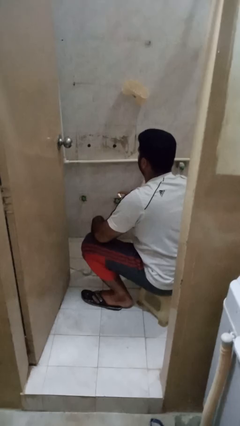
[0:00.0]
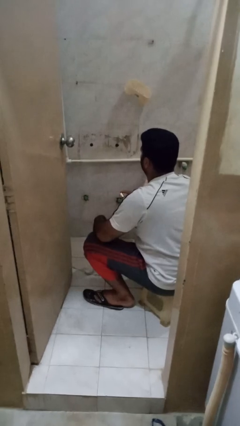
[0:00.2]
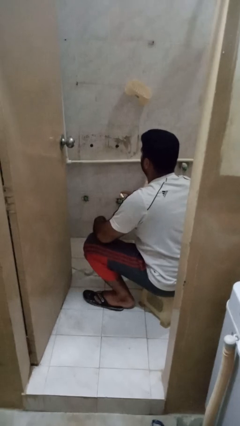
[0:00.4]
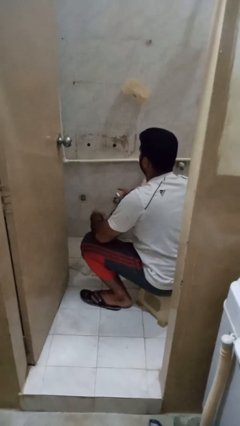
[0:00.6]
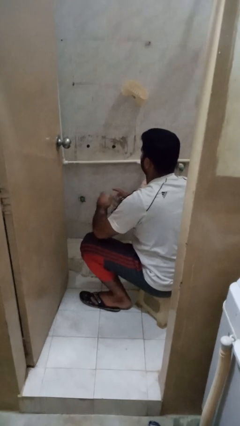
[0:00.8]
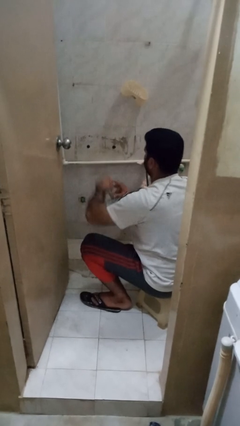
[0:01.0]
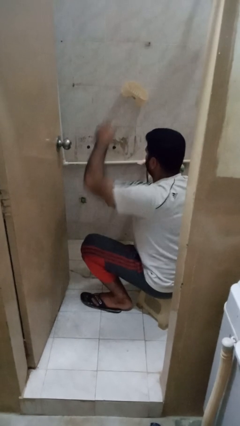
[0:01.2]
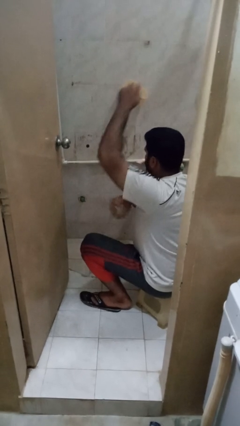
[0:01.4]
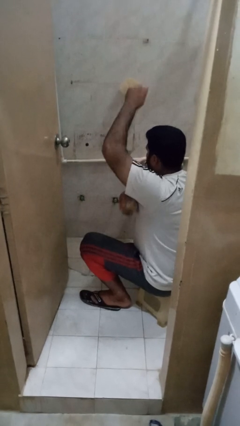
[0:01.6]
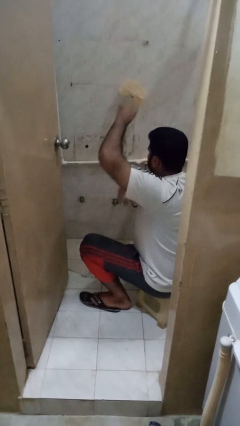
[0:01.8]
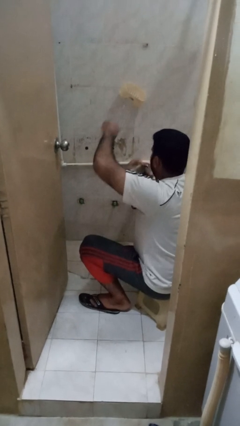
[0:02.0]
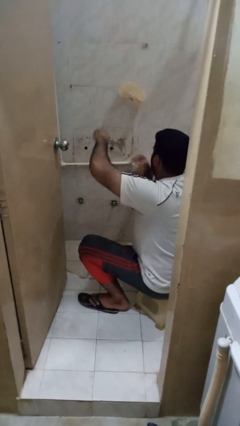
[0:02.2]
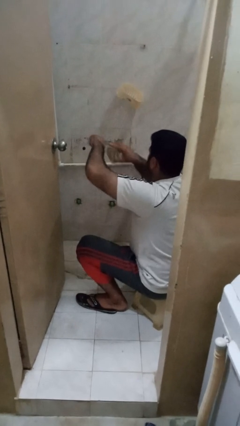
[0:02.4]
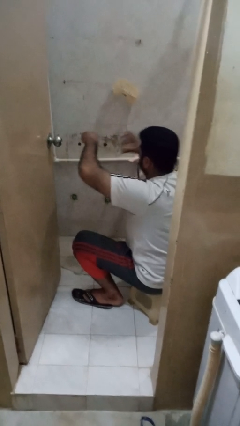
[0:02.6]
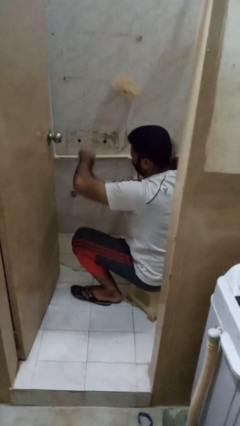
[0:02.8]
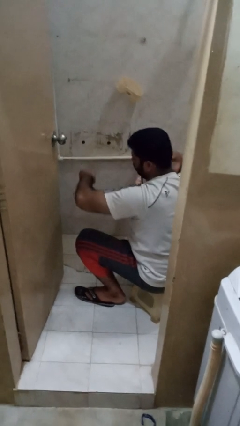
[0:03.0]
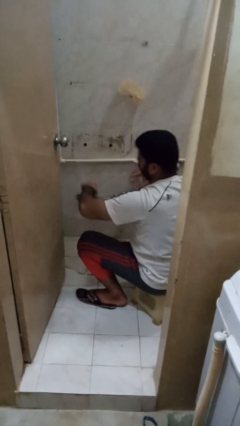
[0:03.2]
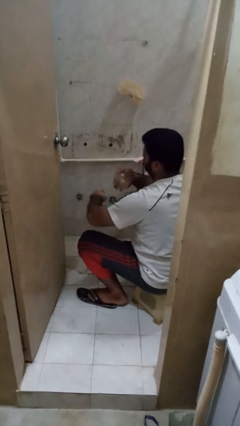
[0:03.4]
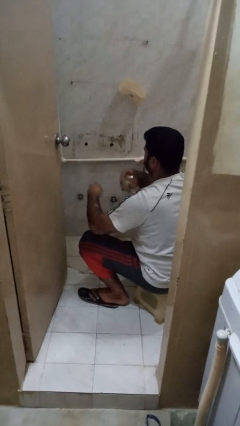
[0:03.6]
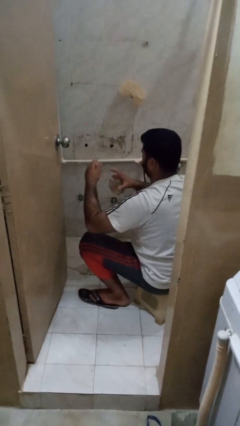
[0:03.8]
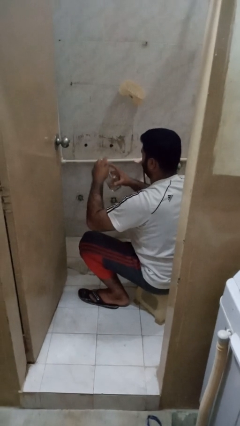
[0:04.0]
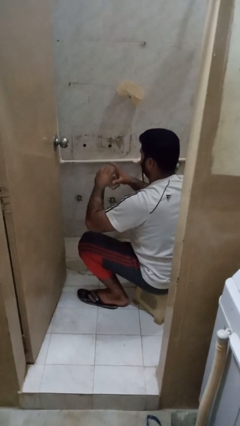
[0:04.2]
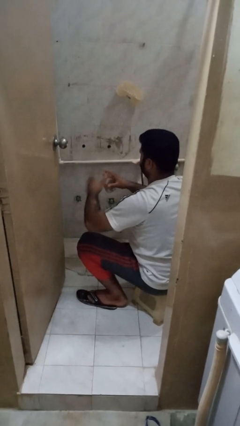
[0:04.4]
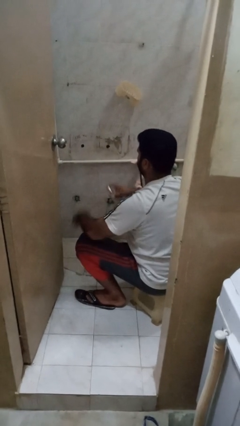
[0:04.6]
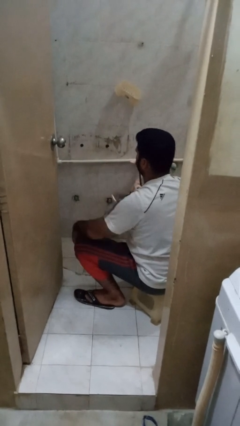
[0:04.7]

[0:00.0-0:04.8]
person applies deodorant

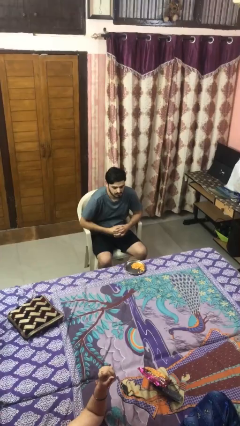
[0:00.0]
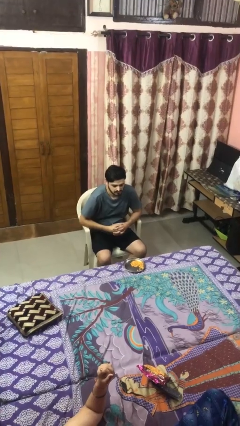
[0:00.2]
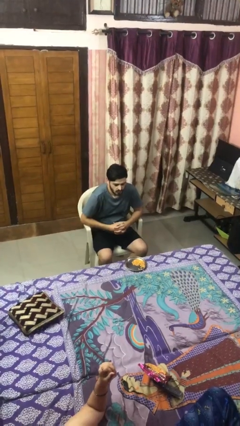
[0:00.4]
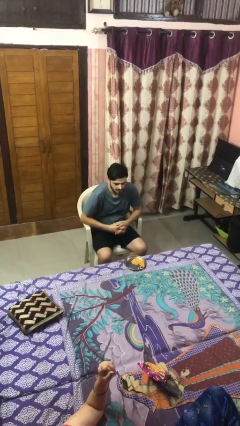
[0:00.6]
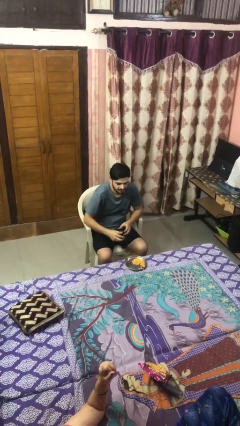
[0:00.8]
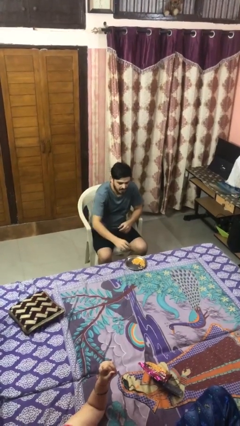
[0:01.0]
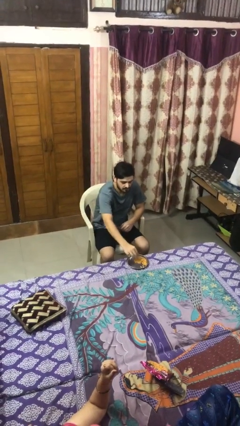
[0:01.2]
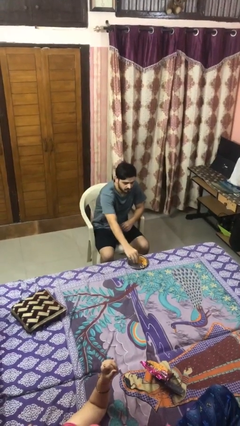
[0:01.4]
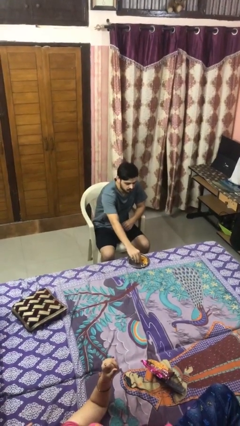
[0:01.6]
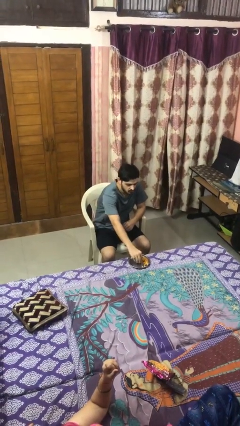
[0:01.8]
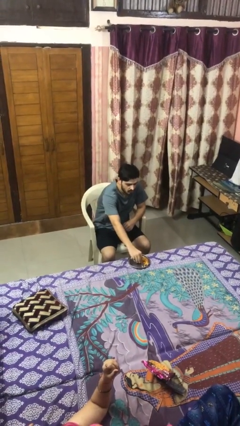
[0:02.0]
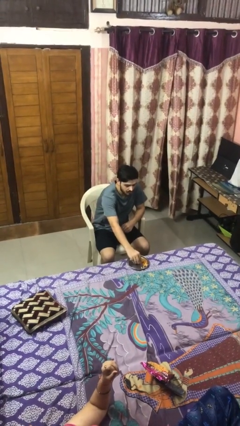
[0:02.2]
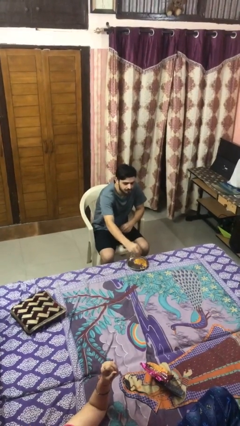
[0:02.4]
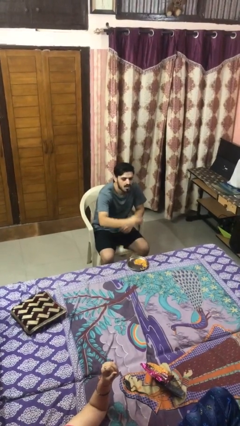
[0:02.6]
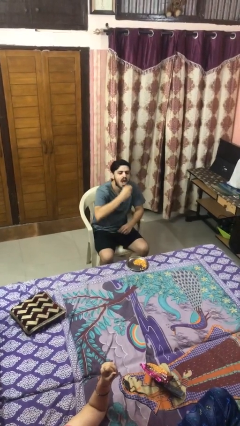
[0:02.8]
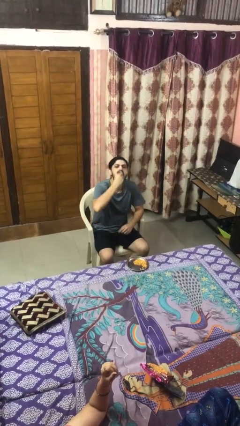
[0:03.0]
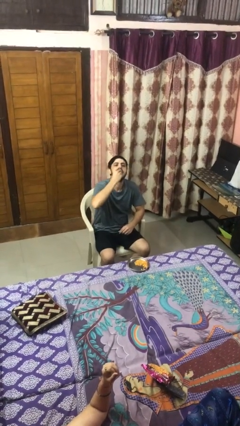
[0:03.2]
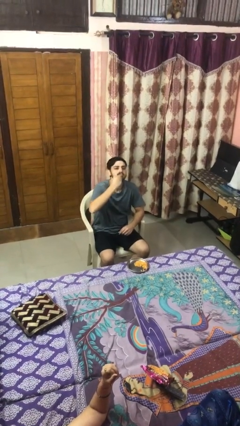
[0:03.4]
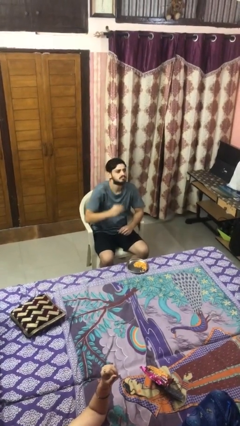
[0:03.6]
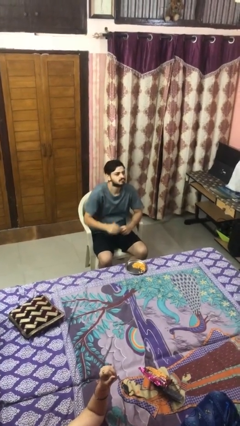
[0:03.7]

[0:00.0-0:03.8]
person eats with hands

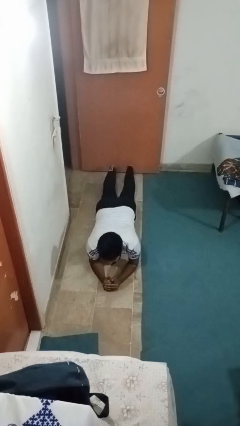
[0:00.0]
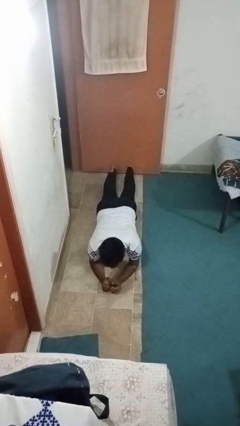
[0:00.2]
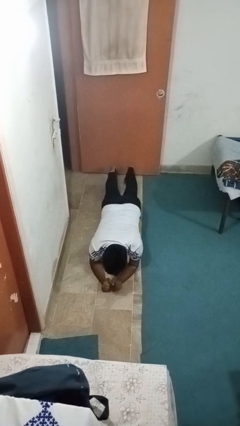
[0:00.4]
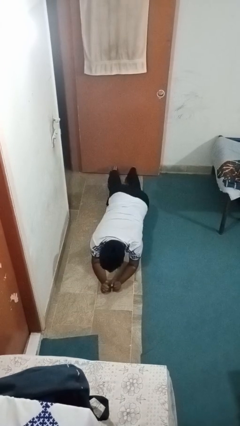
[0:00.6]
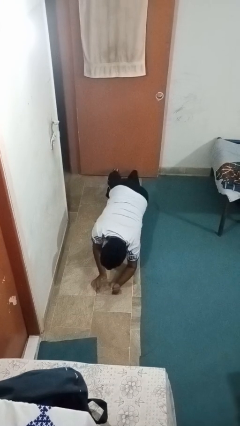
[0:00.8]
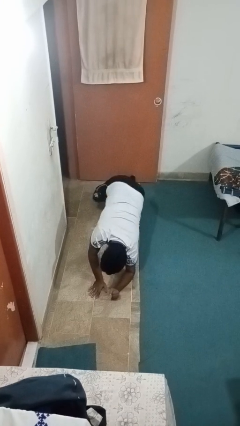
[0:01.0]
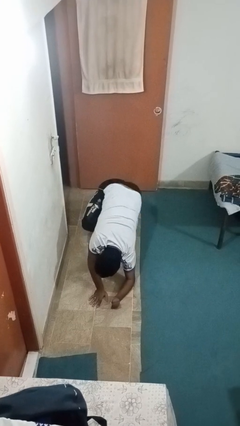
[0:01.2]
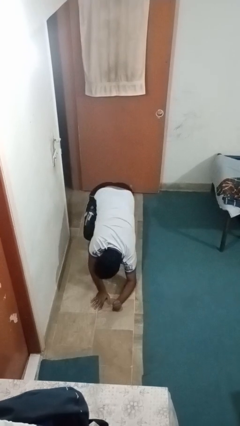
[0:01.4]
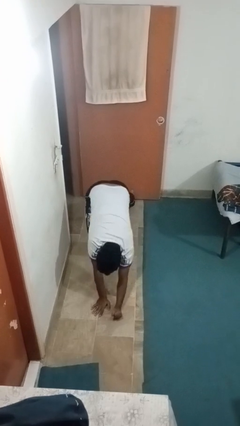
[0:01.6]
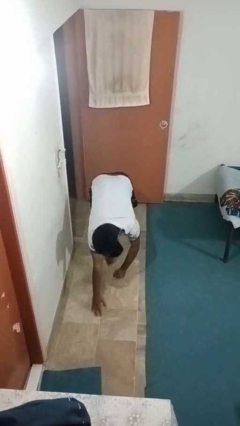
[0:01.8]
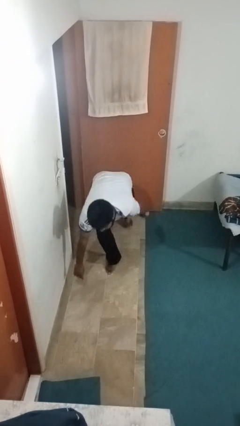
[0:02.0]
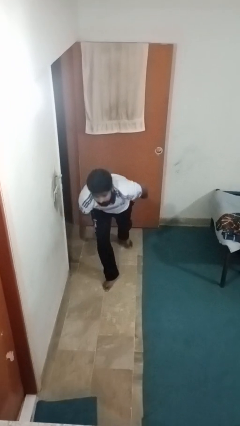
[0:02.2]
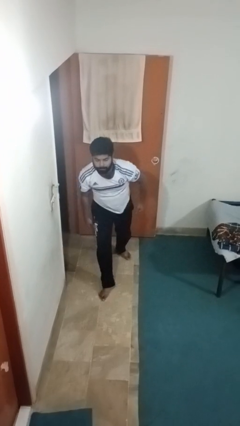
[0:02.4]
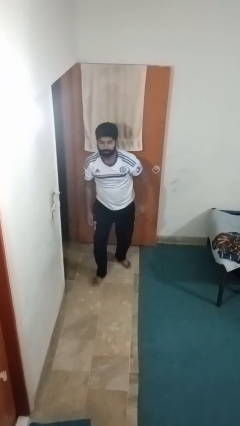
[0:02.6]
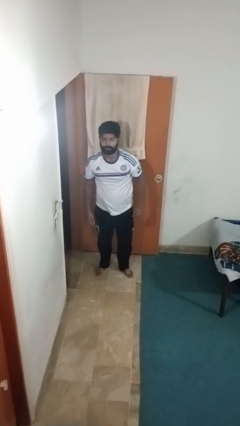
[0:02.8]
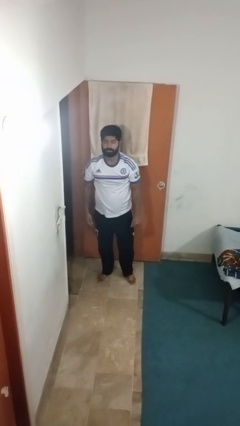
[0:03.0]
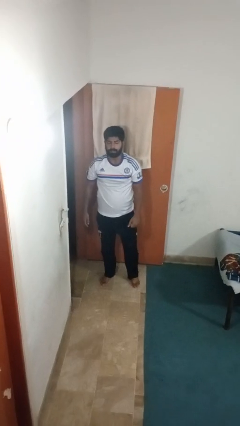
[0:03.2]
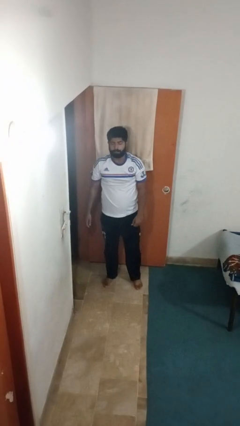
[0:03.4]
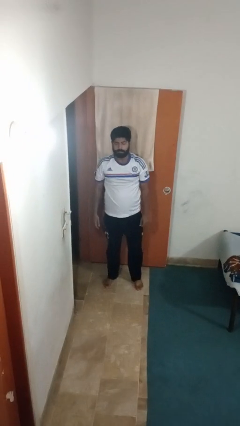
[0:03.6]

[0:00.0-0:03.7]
person stands up from floor

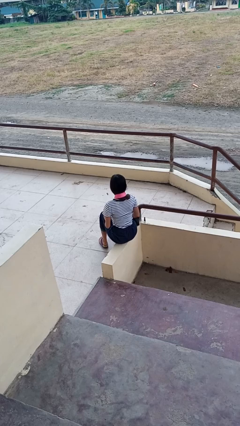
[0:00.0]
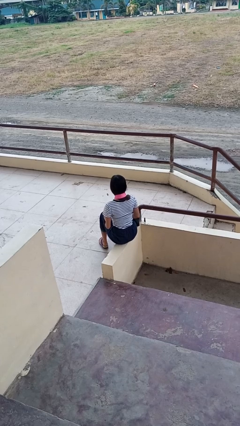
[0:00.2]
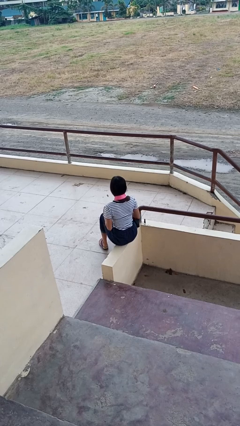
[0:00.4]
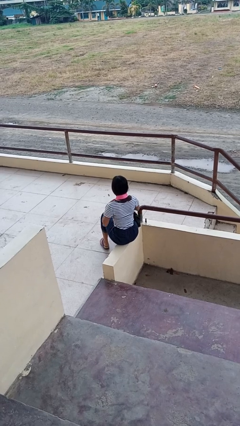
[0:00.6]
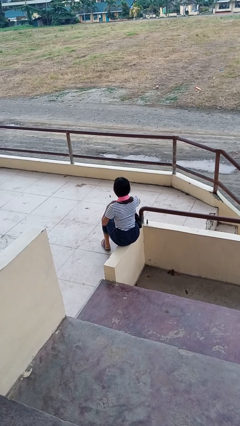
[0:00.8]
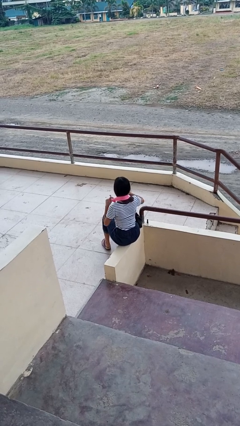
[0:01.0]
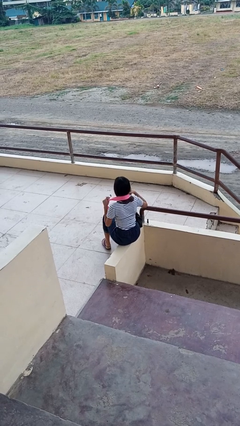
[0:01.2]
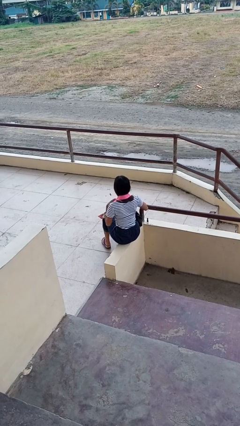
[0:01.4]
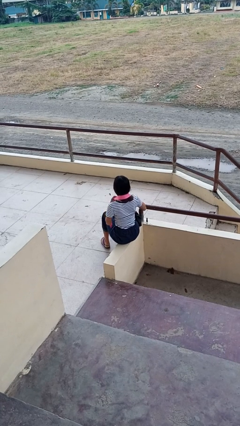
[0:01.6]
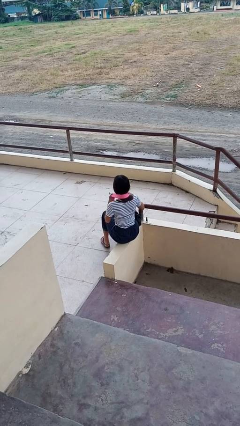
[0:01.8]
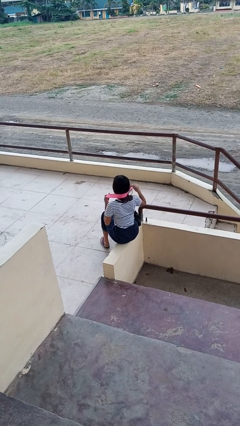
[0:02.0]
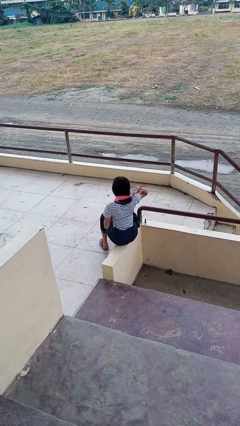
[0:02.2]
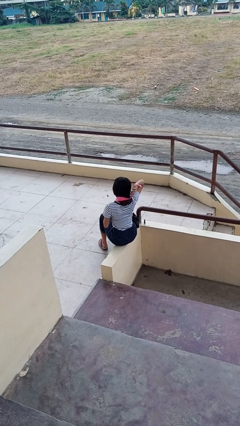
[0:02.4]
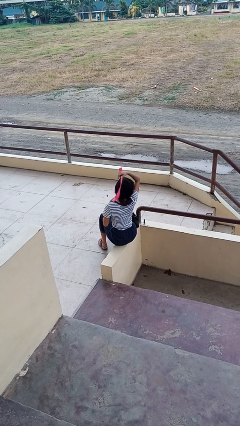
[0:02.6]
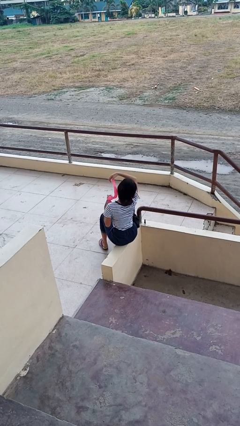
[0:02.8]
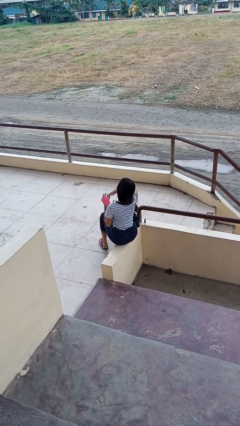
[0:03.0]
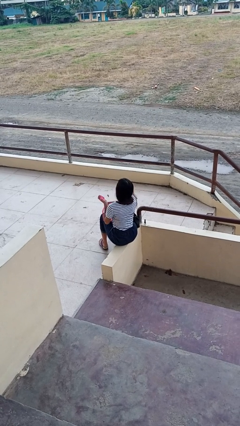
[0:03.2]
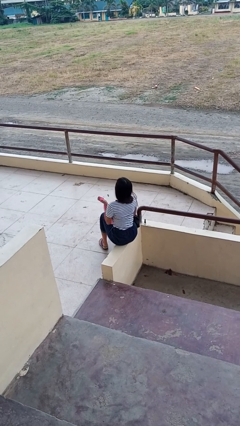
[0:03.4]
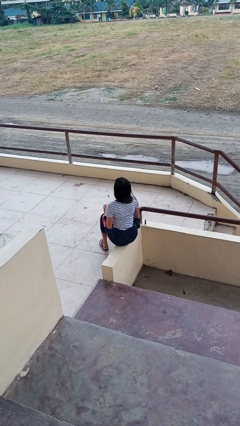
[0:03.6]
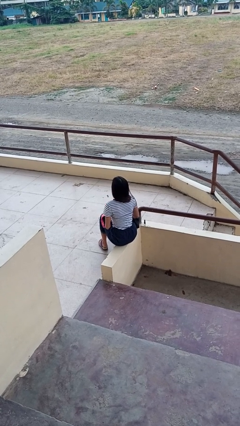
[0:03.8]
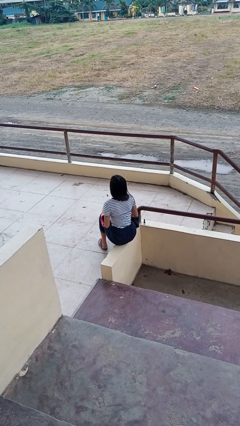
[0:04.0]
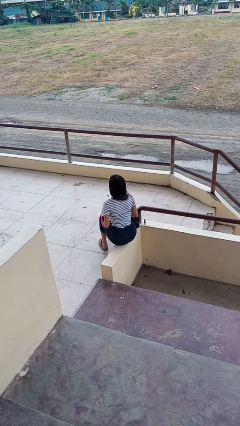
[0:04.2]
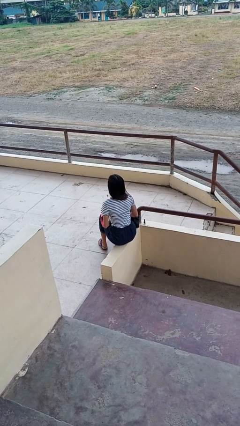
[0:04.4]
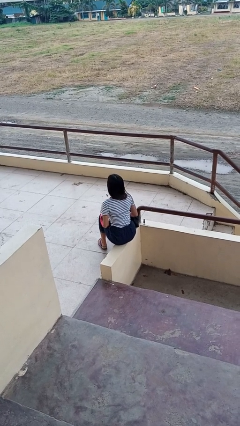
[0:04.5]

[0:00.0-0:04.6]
person takes off necktie

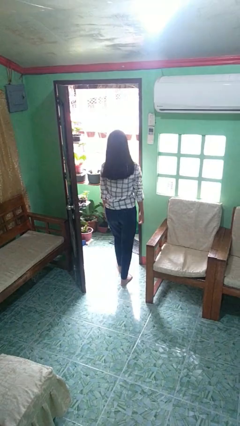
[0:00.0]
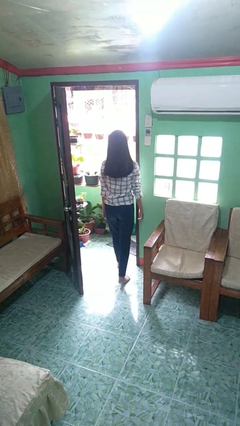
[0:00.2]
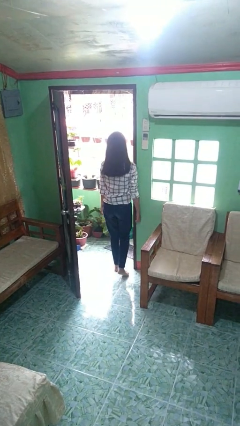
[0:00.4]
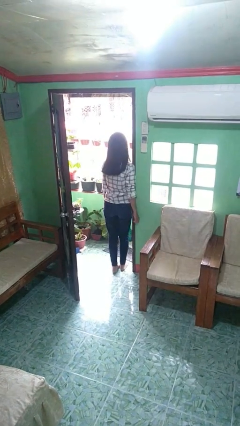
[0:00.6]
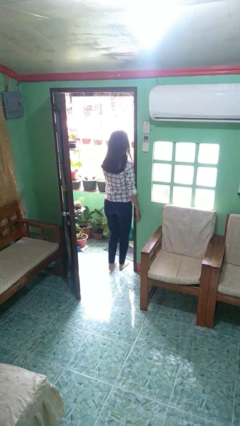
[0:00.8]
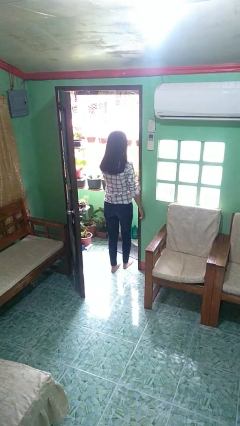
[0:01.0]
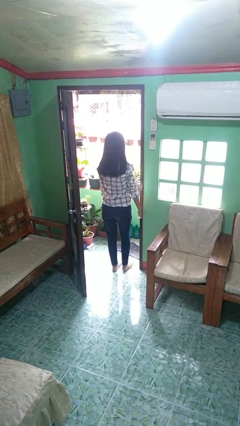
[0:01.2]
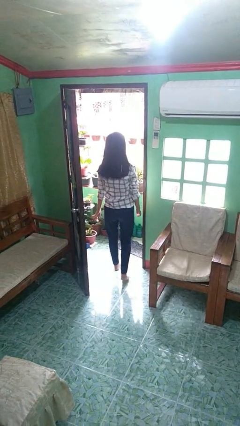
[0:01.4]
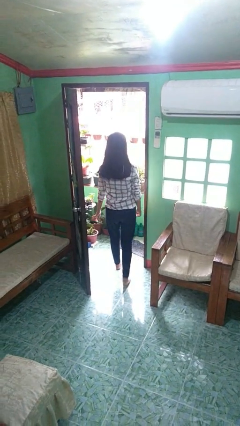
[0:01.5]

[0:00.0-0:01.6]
person bumps into wall
